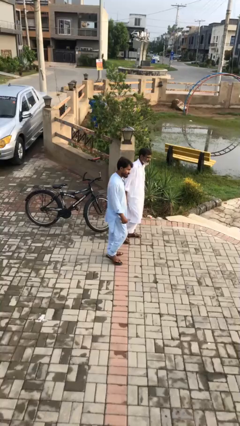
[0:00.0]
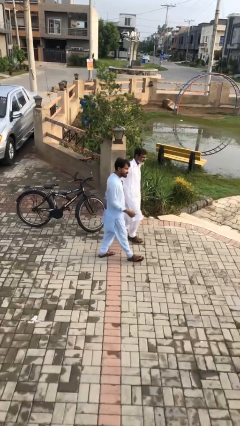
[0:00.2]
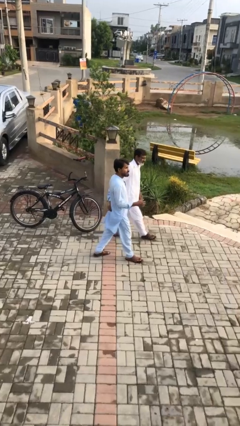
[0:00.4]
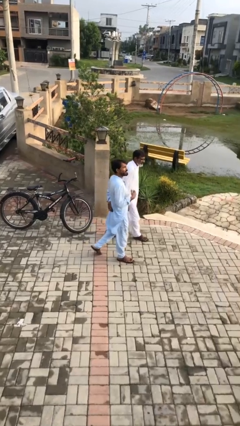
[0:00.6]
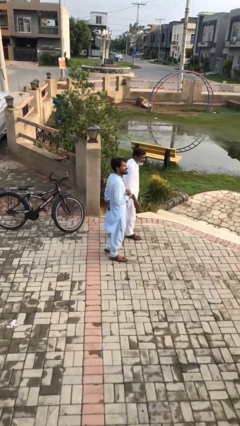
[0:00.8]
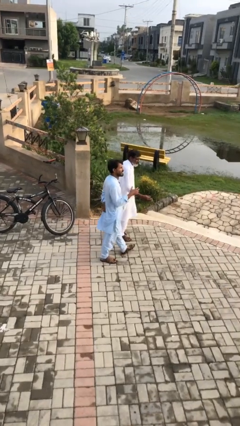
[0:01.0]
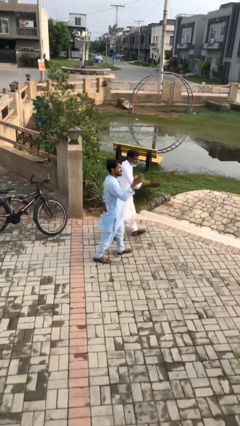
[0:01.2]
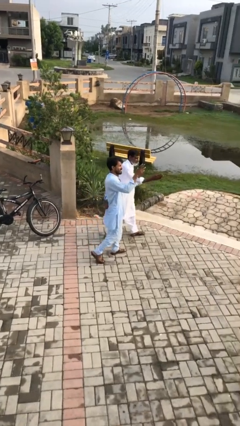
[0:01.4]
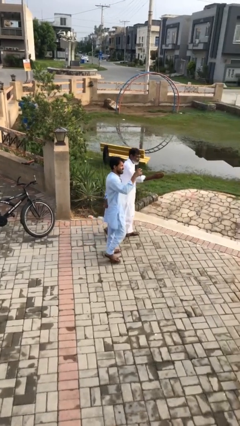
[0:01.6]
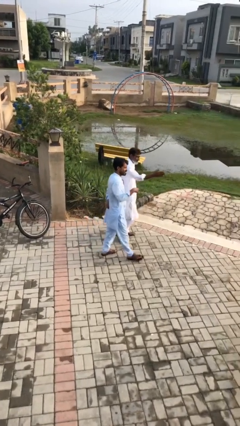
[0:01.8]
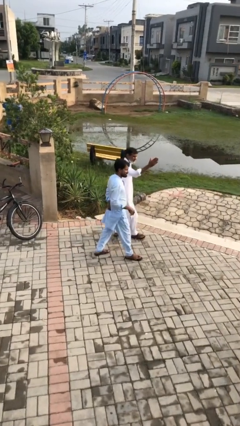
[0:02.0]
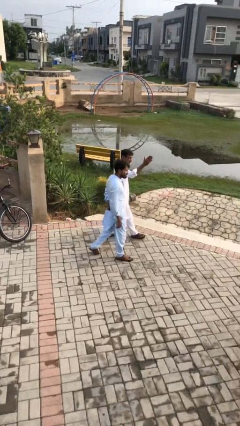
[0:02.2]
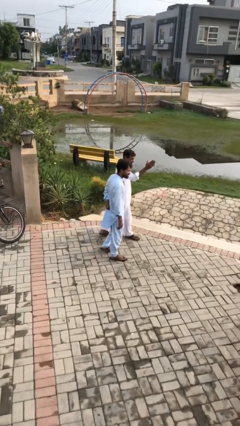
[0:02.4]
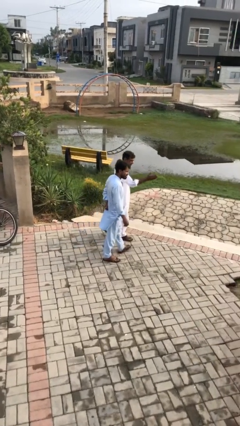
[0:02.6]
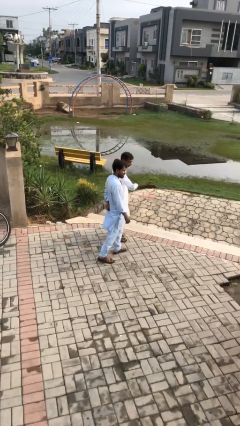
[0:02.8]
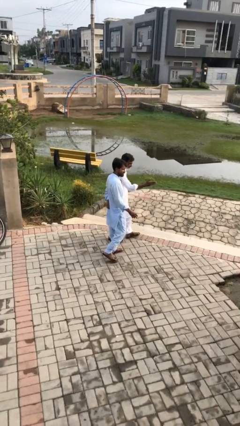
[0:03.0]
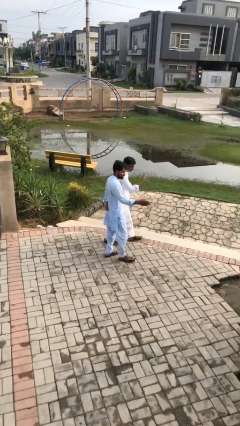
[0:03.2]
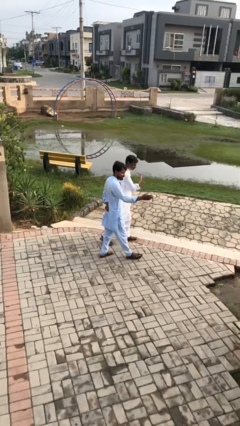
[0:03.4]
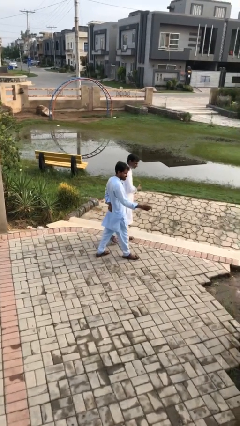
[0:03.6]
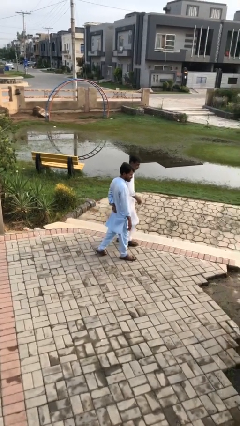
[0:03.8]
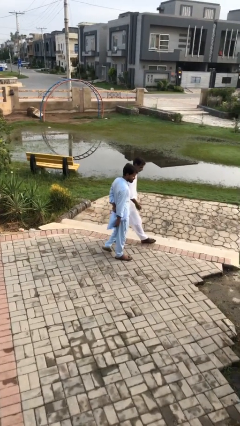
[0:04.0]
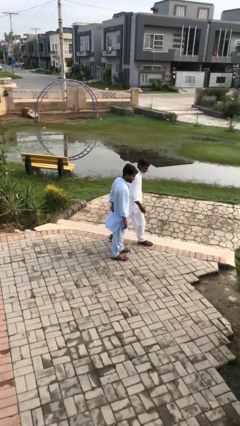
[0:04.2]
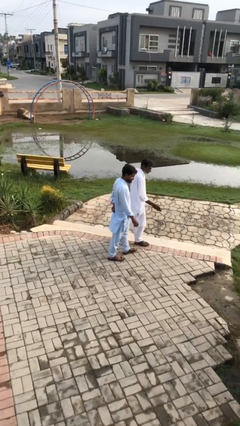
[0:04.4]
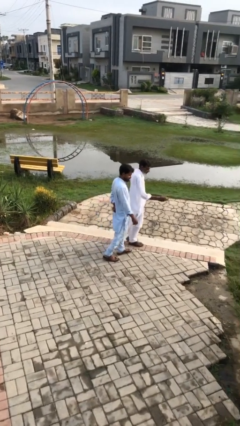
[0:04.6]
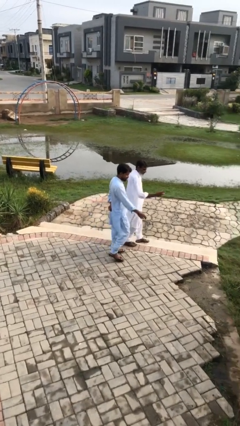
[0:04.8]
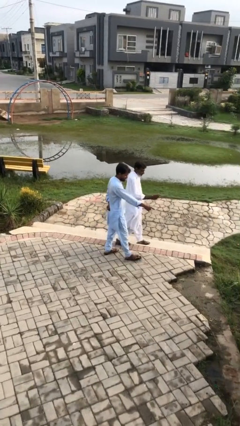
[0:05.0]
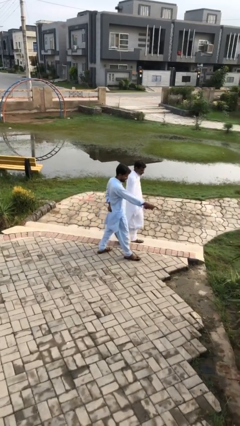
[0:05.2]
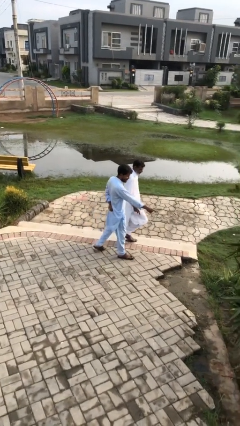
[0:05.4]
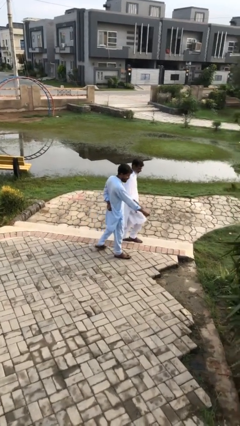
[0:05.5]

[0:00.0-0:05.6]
person talks to person

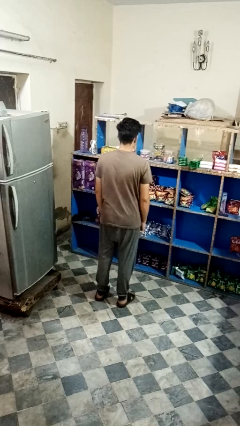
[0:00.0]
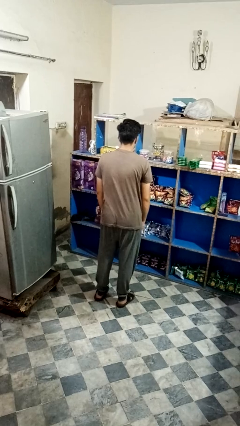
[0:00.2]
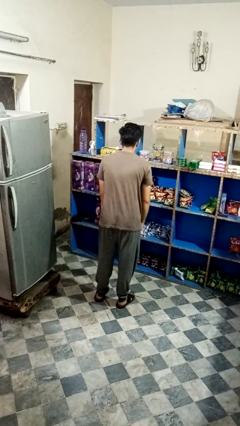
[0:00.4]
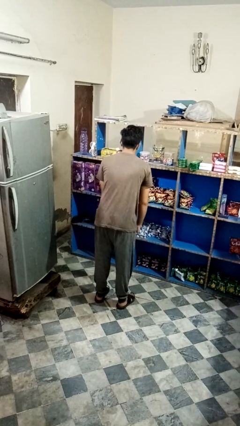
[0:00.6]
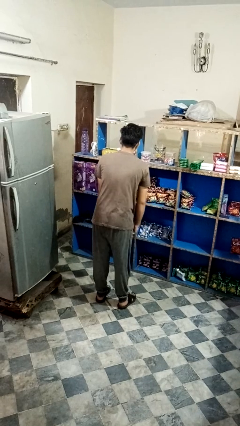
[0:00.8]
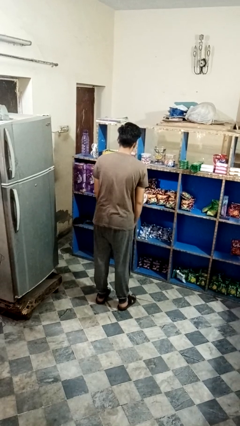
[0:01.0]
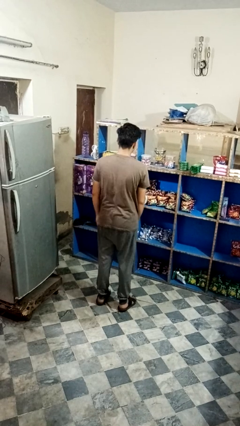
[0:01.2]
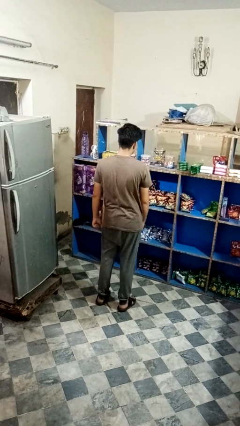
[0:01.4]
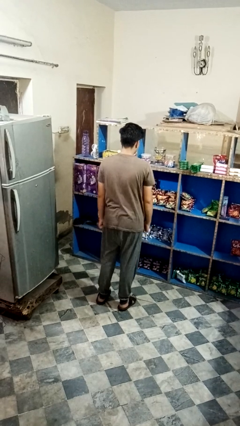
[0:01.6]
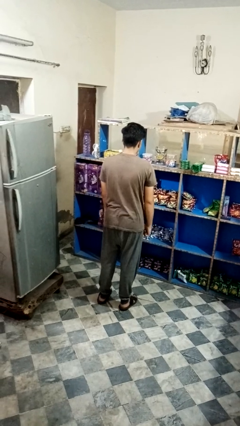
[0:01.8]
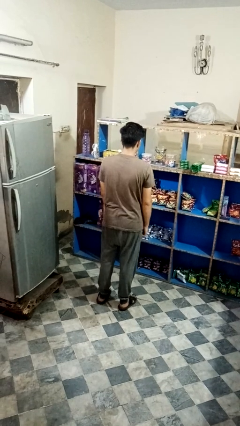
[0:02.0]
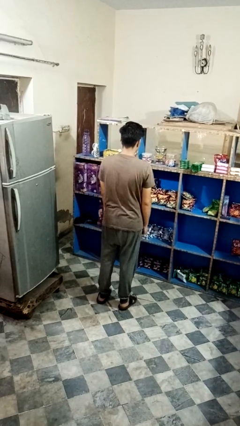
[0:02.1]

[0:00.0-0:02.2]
person wiggles hips

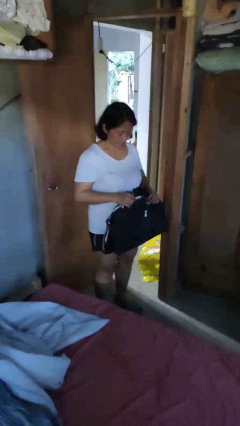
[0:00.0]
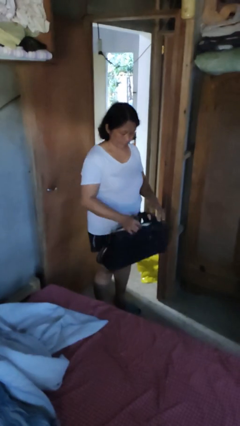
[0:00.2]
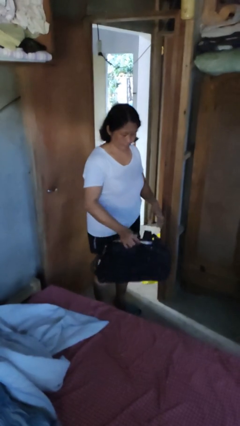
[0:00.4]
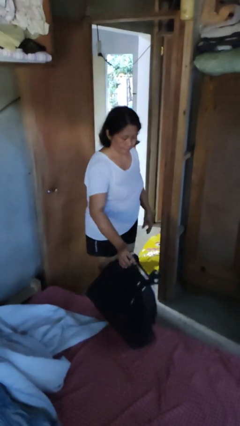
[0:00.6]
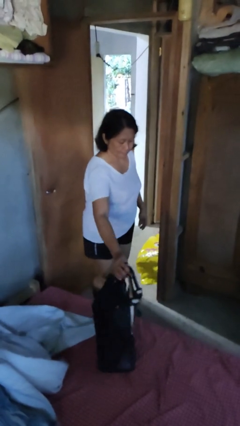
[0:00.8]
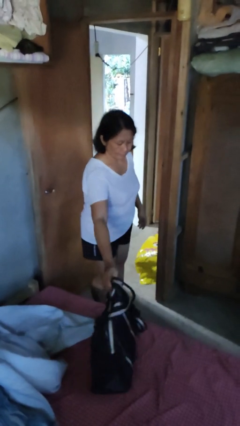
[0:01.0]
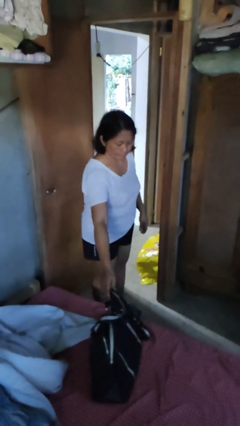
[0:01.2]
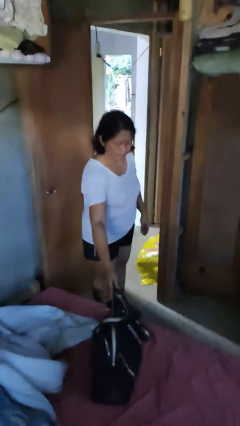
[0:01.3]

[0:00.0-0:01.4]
person puts down object on bed

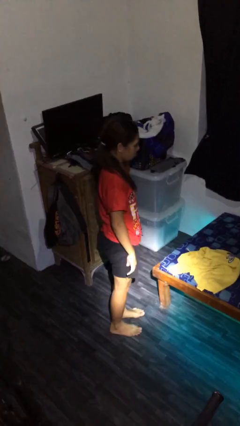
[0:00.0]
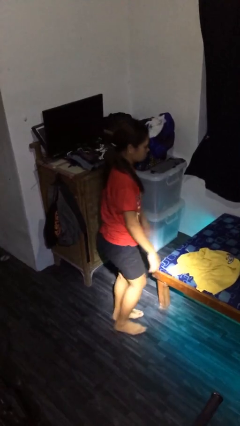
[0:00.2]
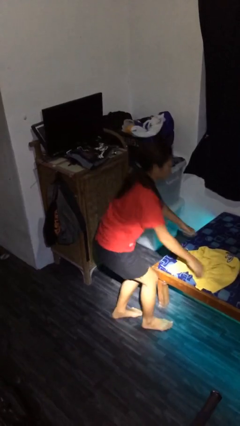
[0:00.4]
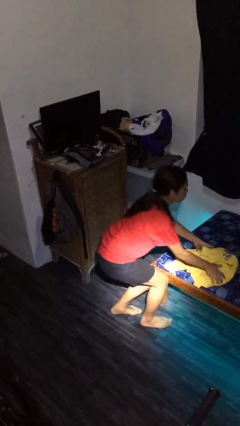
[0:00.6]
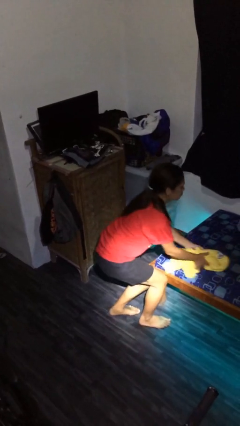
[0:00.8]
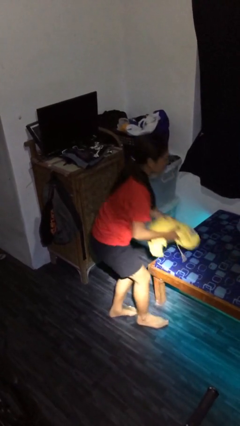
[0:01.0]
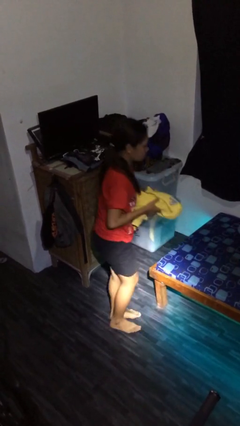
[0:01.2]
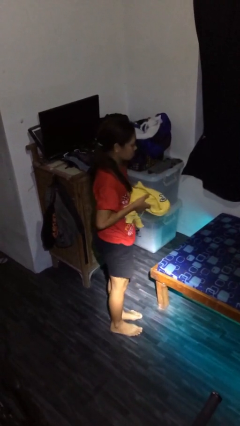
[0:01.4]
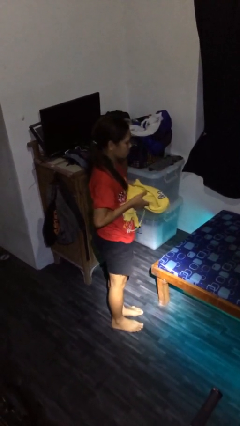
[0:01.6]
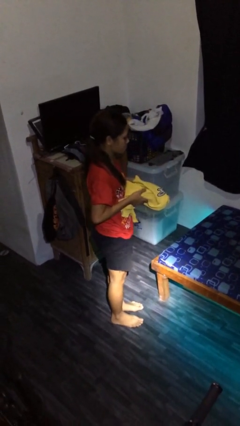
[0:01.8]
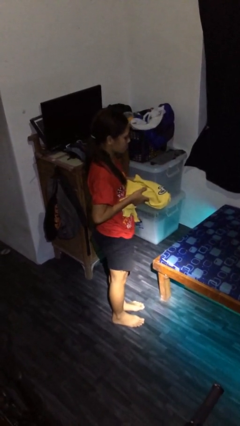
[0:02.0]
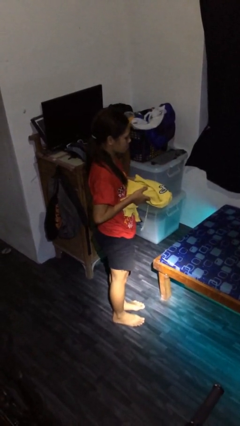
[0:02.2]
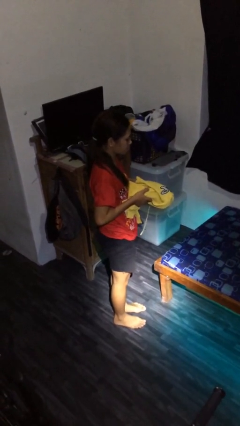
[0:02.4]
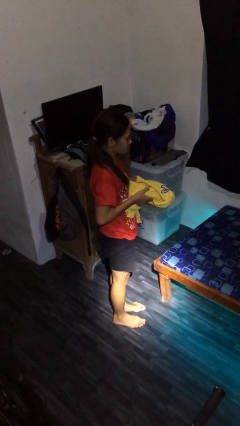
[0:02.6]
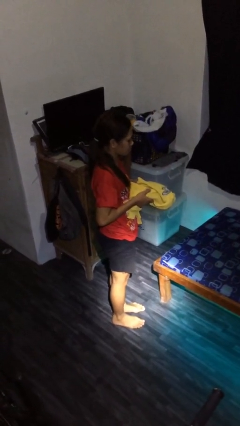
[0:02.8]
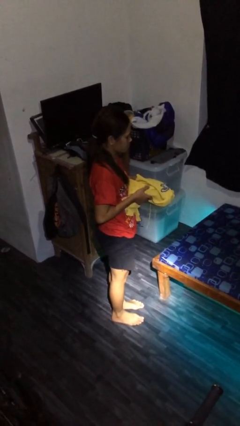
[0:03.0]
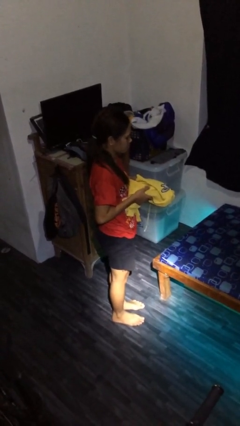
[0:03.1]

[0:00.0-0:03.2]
person picks up object from bed

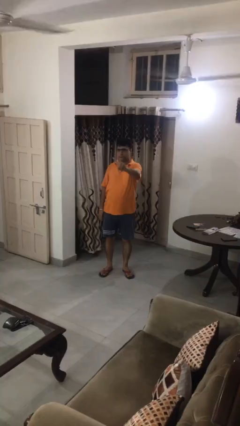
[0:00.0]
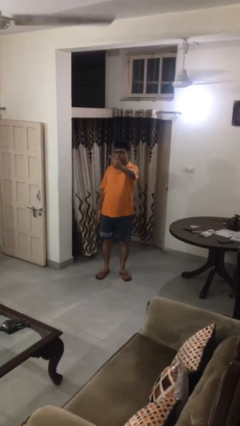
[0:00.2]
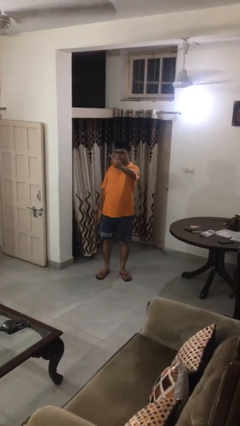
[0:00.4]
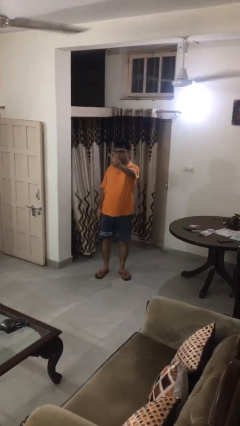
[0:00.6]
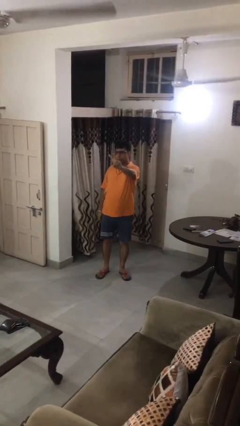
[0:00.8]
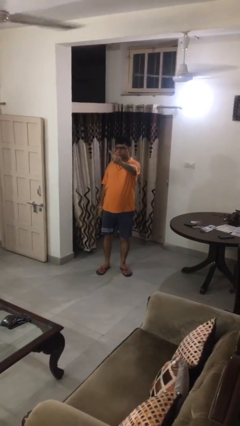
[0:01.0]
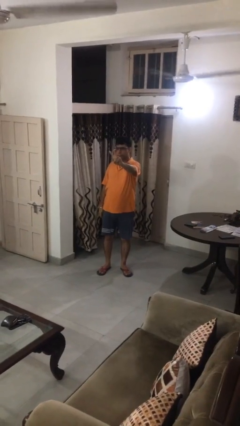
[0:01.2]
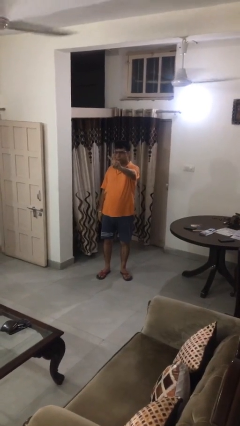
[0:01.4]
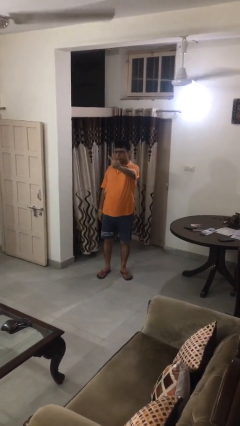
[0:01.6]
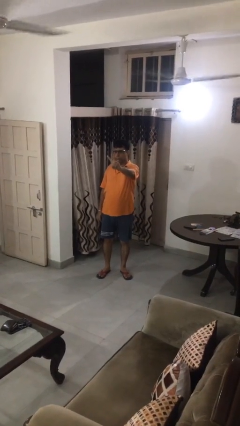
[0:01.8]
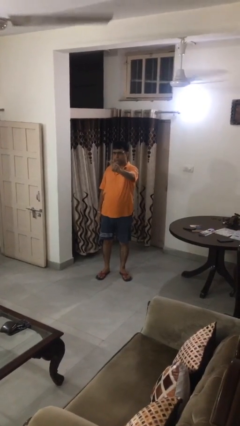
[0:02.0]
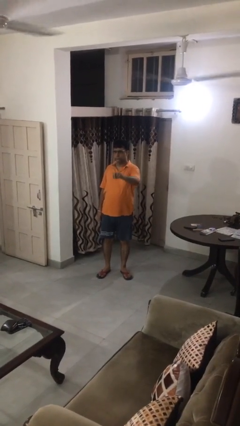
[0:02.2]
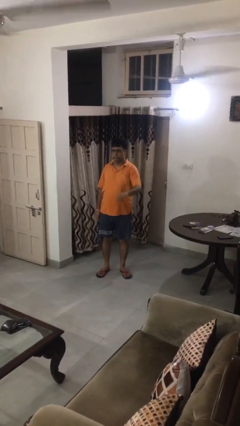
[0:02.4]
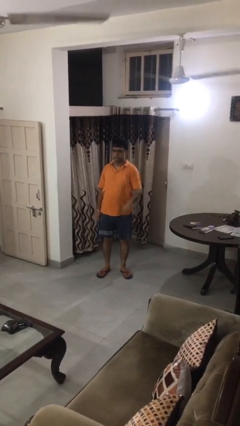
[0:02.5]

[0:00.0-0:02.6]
person gestures peace

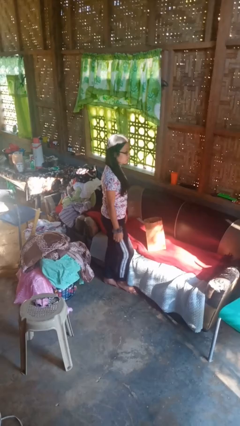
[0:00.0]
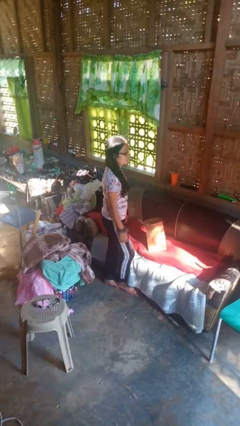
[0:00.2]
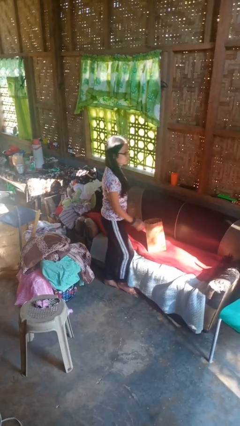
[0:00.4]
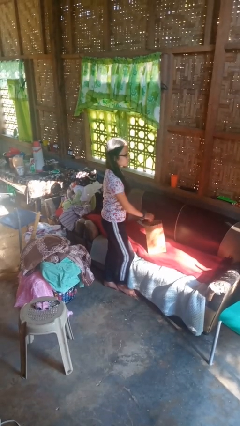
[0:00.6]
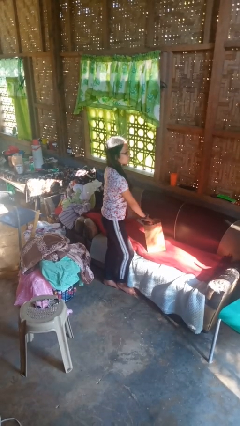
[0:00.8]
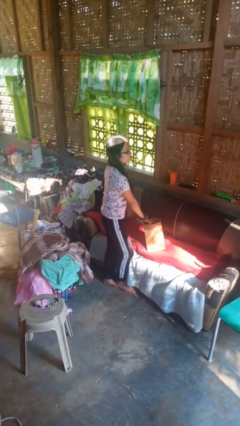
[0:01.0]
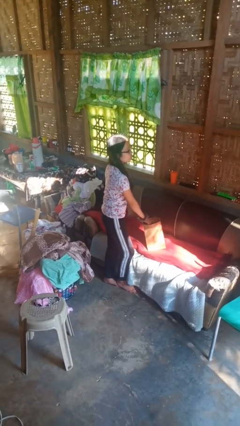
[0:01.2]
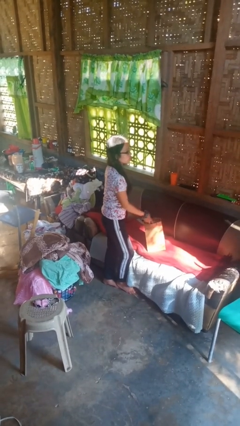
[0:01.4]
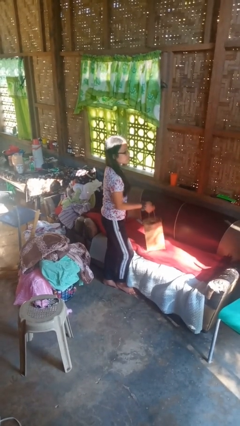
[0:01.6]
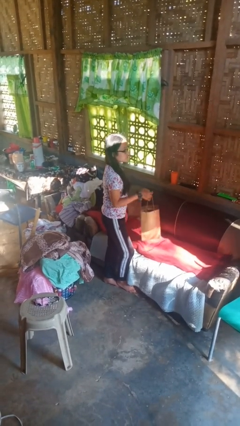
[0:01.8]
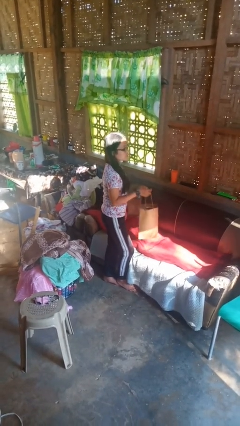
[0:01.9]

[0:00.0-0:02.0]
person picks up object from couch

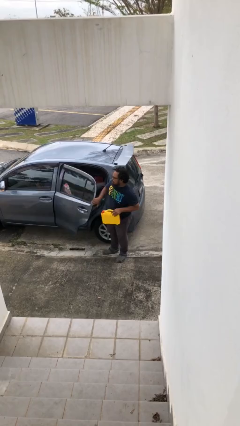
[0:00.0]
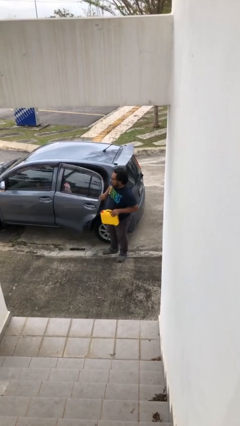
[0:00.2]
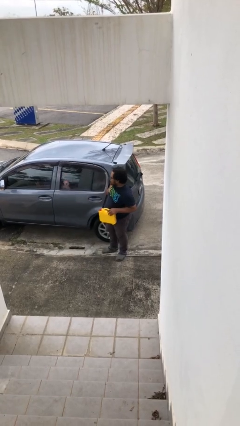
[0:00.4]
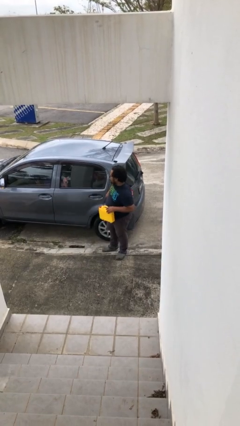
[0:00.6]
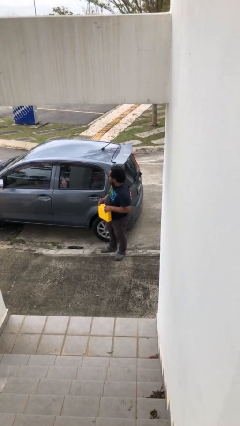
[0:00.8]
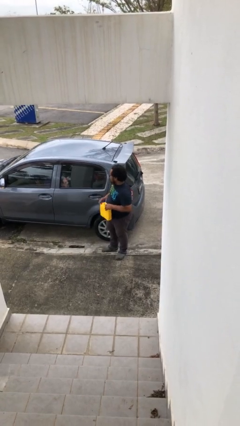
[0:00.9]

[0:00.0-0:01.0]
person closes car door
